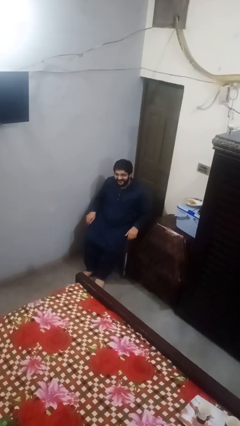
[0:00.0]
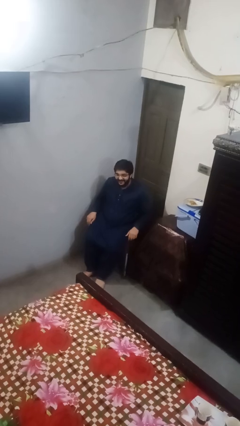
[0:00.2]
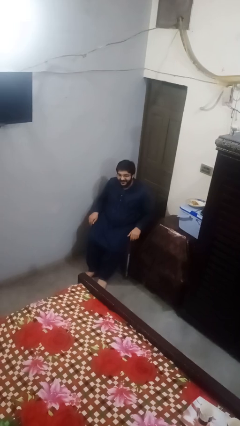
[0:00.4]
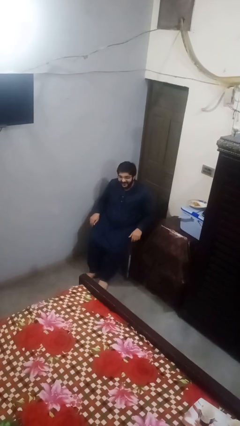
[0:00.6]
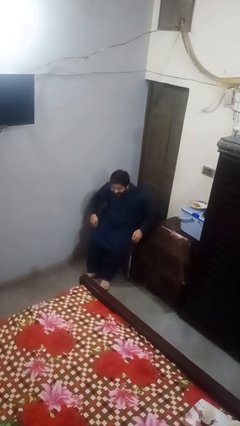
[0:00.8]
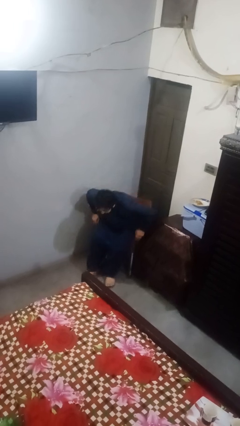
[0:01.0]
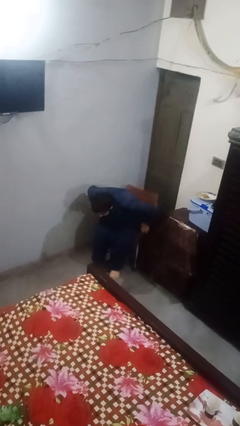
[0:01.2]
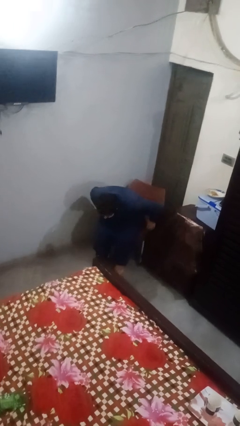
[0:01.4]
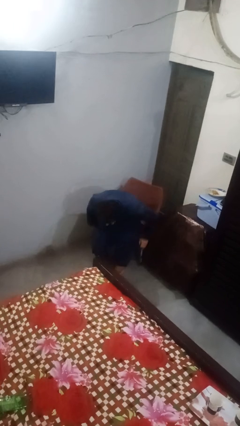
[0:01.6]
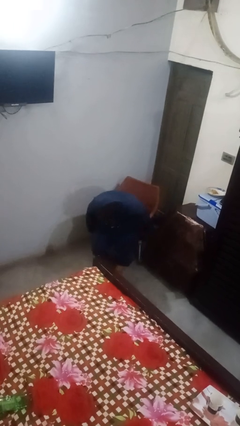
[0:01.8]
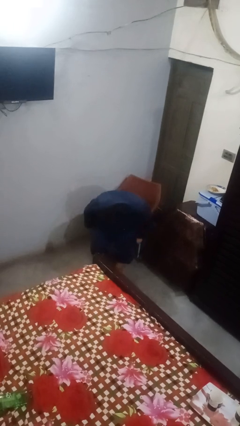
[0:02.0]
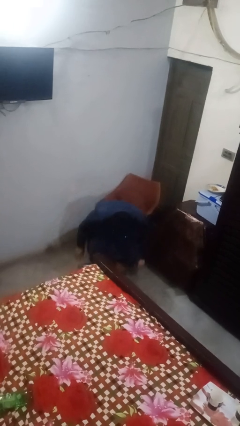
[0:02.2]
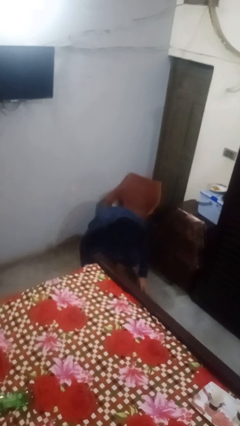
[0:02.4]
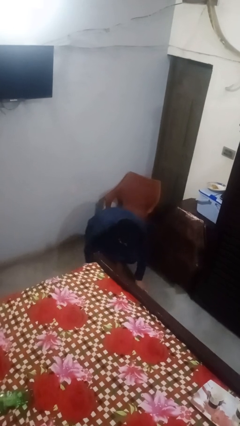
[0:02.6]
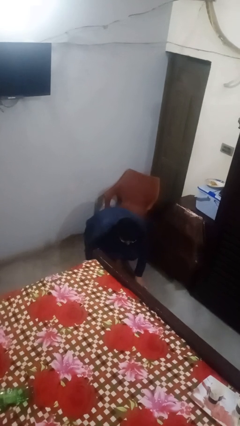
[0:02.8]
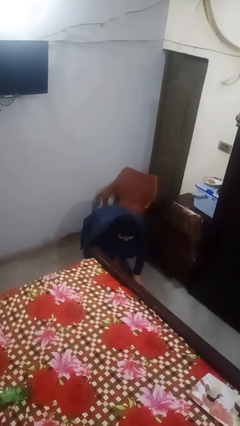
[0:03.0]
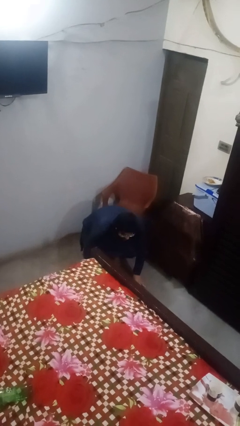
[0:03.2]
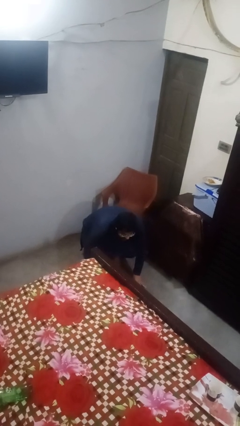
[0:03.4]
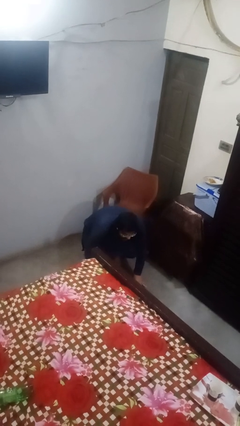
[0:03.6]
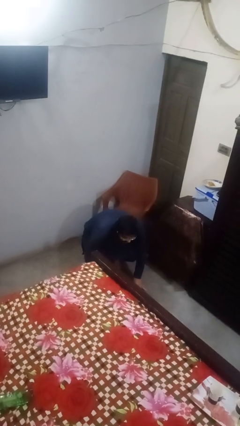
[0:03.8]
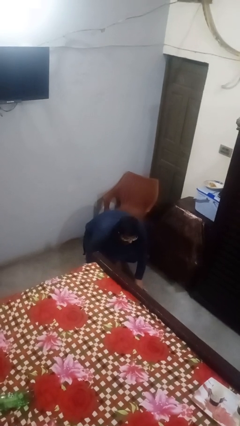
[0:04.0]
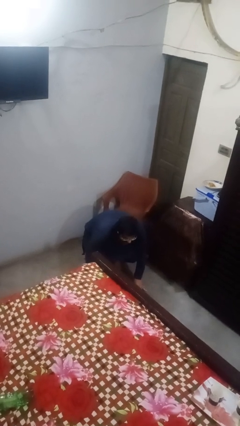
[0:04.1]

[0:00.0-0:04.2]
person falls from chair

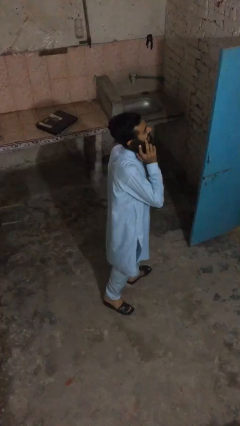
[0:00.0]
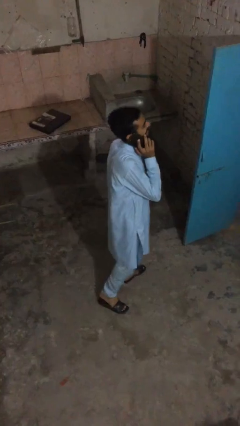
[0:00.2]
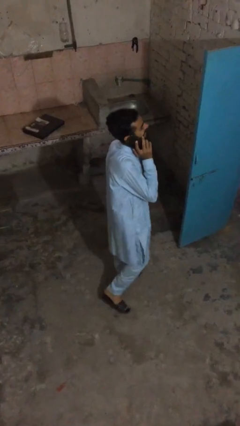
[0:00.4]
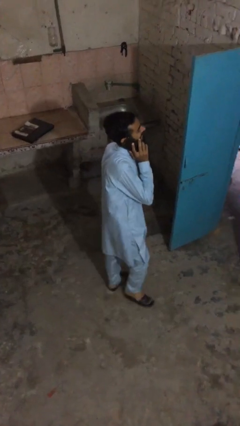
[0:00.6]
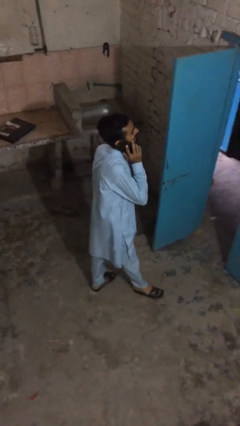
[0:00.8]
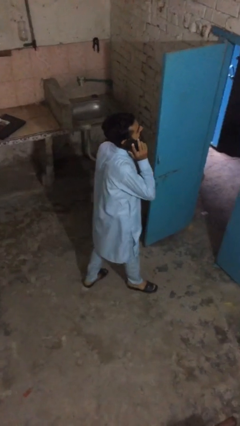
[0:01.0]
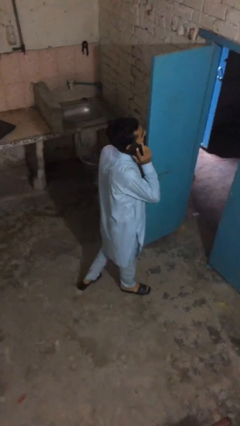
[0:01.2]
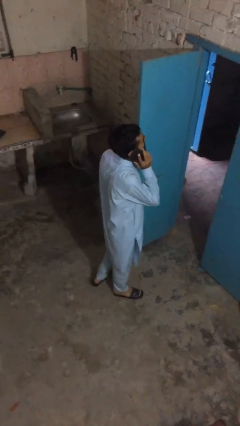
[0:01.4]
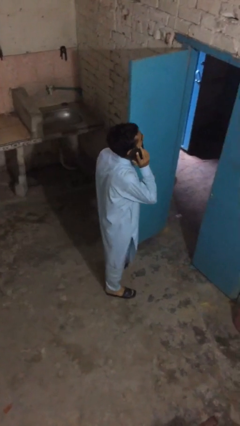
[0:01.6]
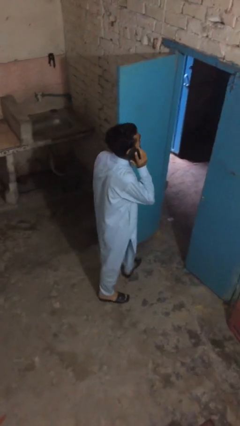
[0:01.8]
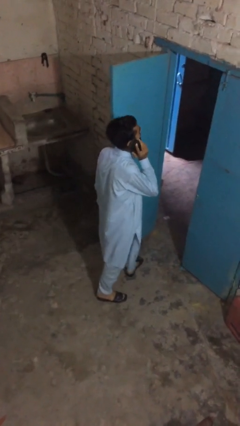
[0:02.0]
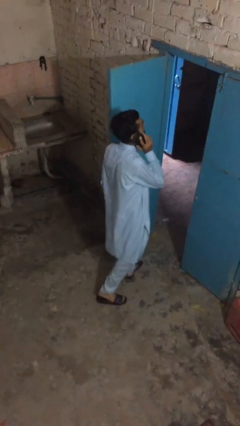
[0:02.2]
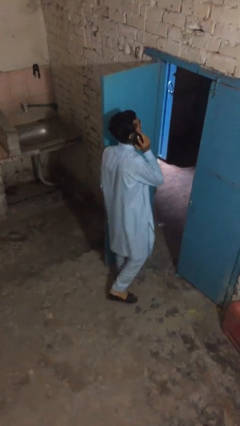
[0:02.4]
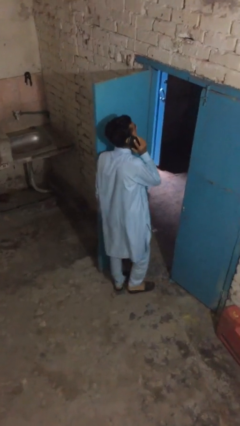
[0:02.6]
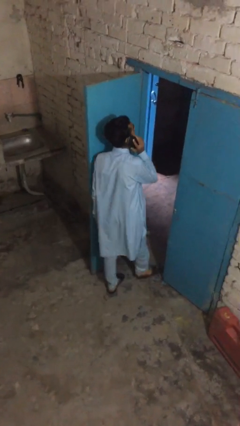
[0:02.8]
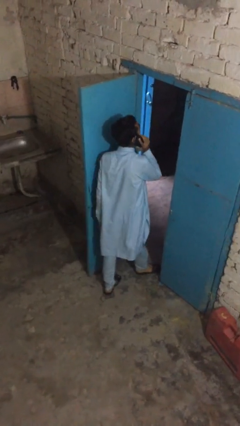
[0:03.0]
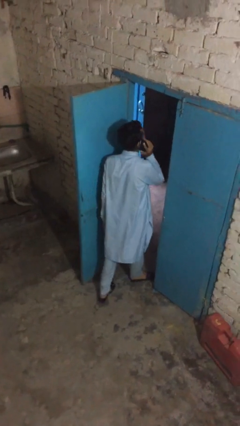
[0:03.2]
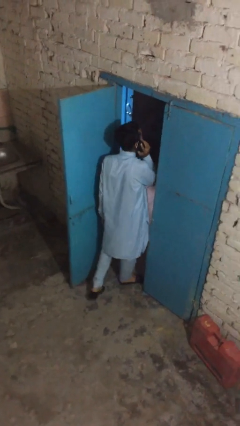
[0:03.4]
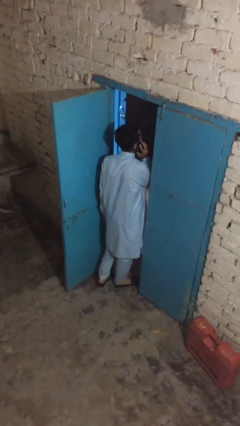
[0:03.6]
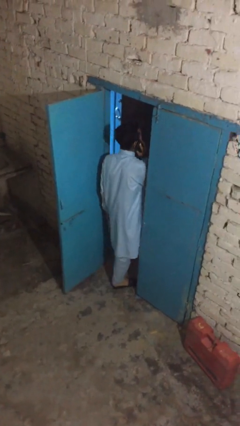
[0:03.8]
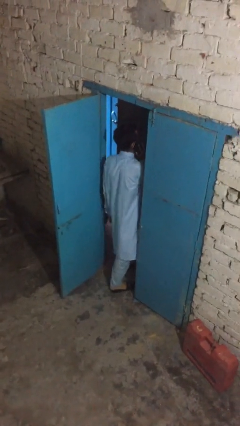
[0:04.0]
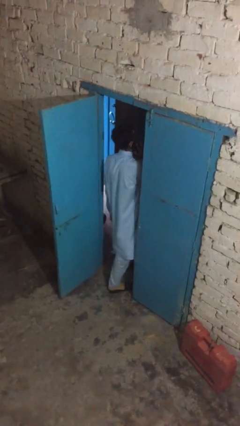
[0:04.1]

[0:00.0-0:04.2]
person exits scene through structure

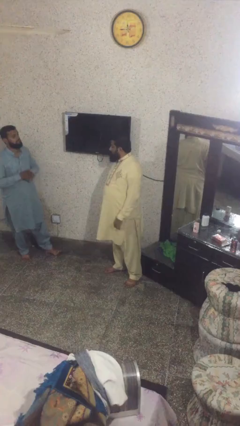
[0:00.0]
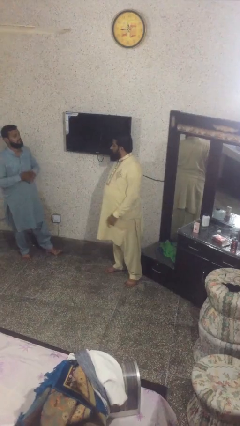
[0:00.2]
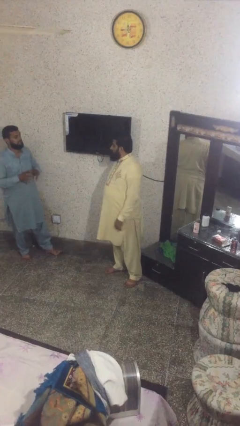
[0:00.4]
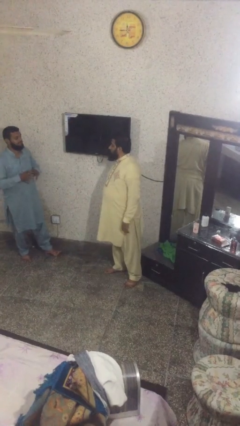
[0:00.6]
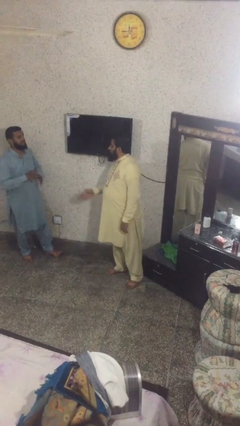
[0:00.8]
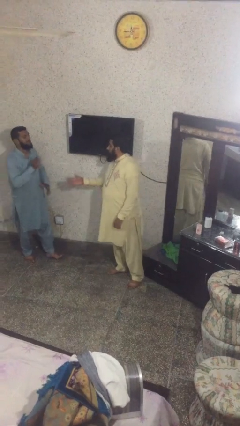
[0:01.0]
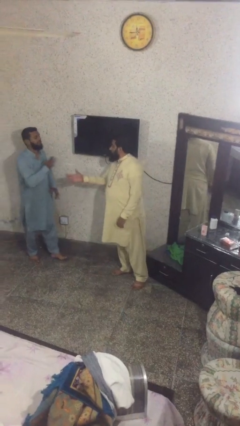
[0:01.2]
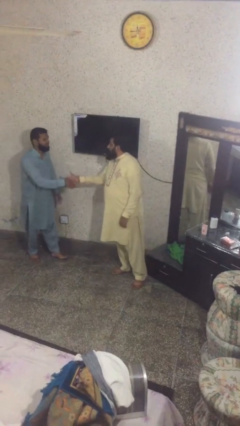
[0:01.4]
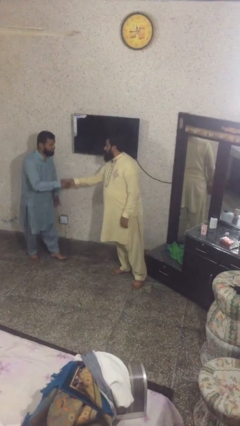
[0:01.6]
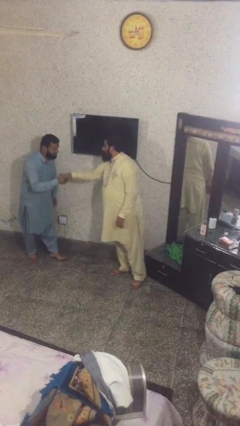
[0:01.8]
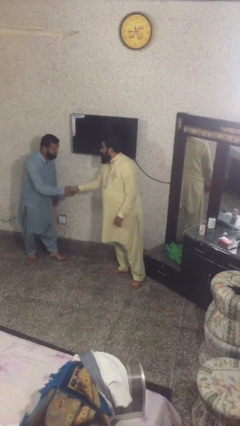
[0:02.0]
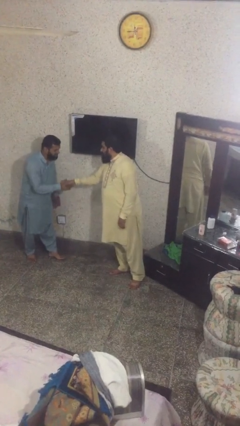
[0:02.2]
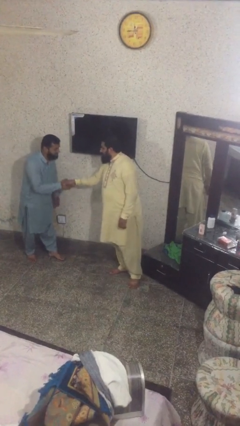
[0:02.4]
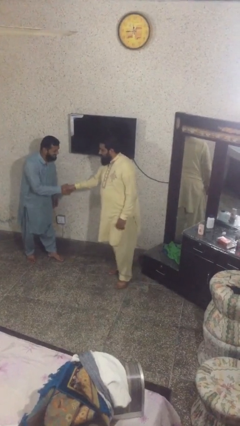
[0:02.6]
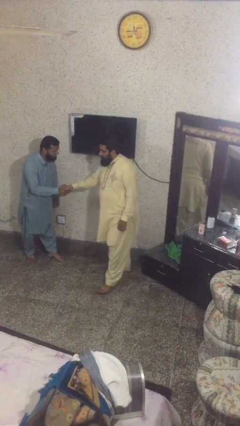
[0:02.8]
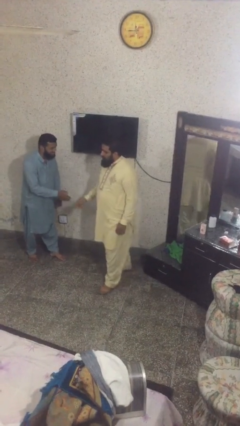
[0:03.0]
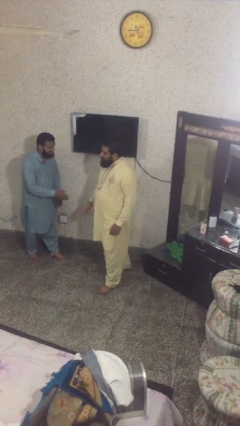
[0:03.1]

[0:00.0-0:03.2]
person shakes hand

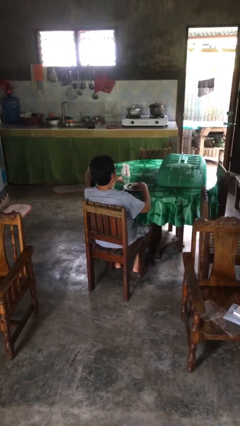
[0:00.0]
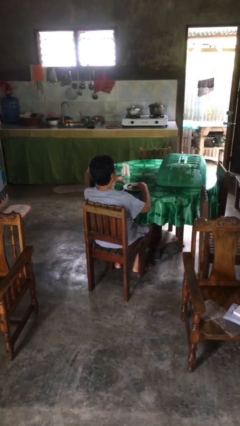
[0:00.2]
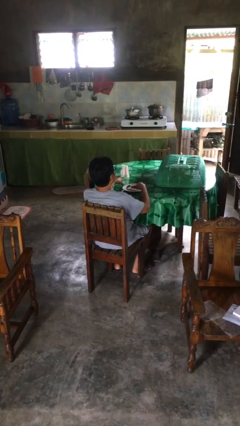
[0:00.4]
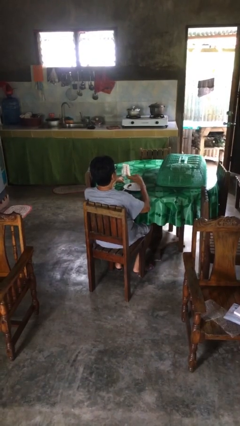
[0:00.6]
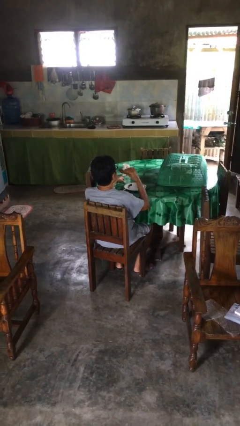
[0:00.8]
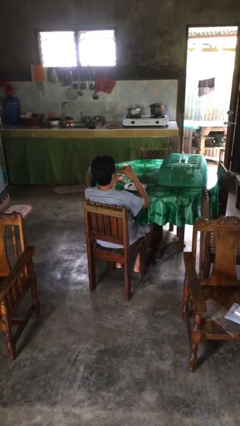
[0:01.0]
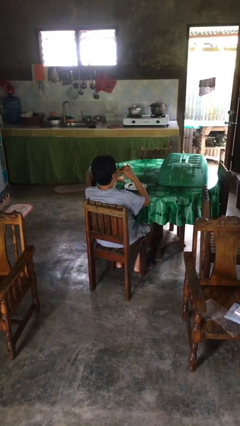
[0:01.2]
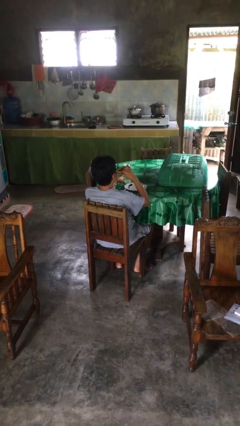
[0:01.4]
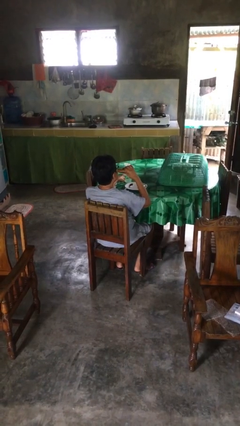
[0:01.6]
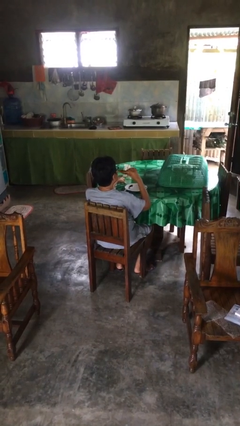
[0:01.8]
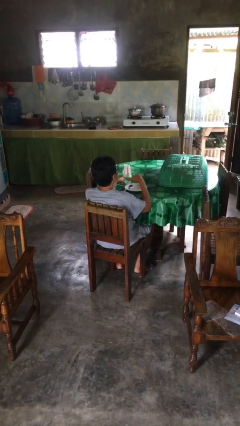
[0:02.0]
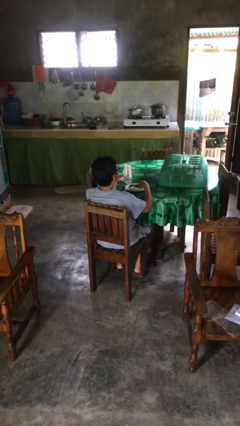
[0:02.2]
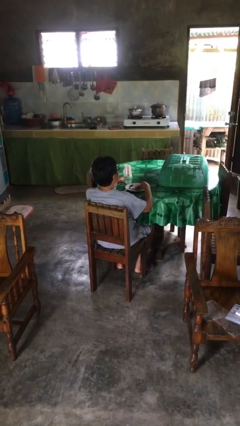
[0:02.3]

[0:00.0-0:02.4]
person eats with hands

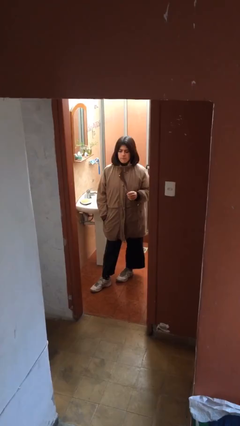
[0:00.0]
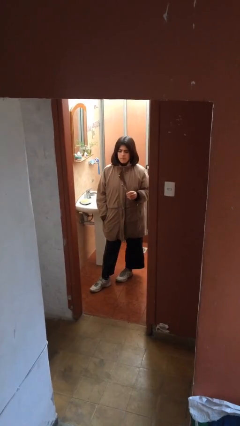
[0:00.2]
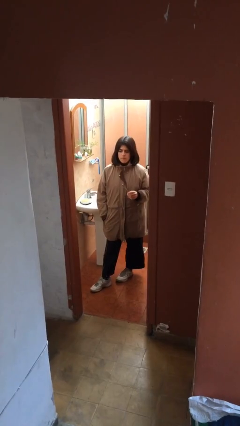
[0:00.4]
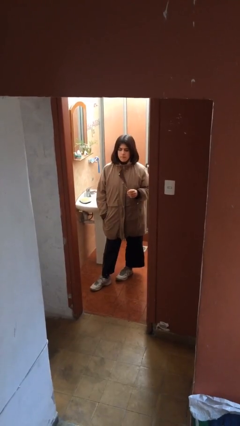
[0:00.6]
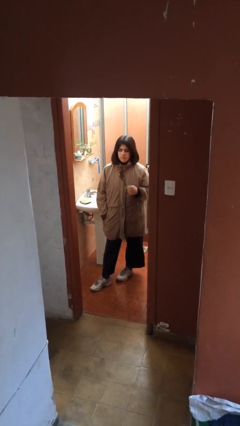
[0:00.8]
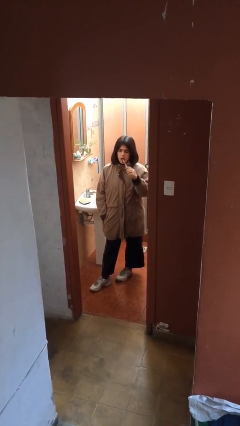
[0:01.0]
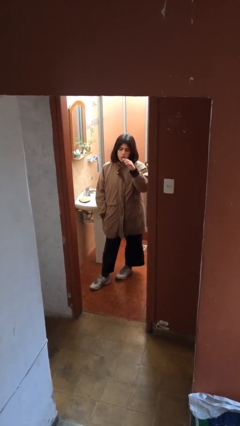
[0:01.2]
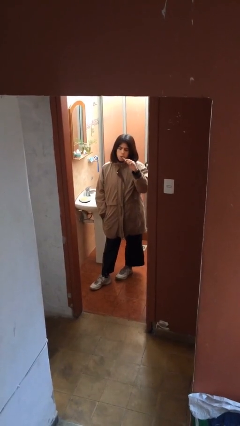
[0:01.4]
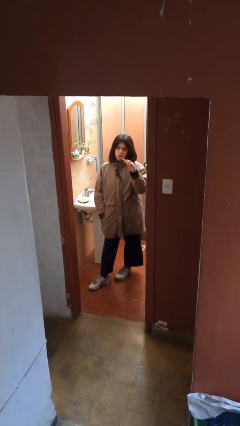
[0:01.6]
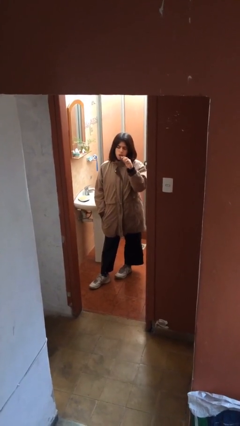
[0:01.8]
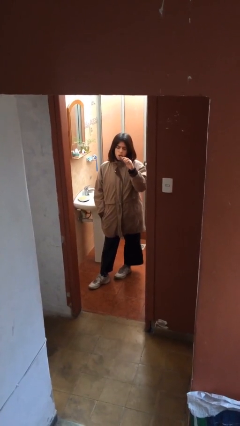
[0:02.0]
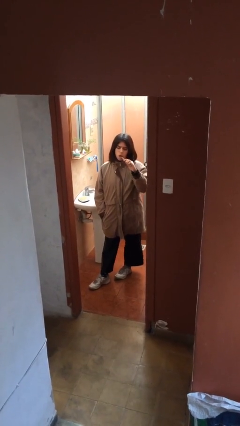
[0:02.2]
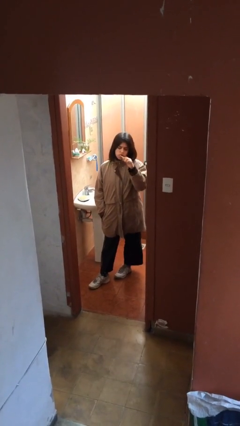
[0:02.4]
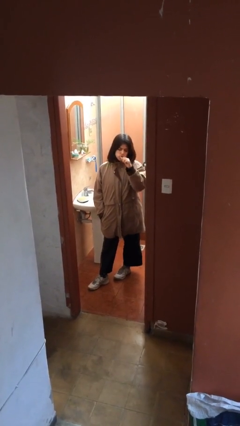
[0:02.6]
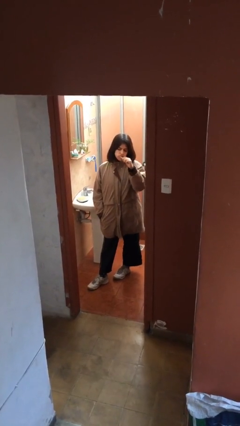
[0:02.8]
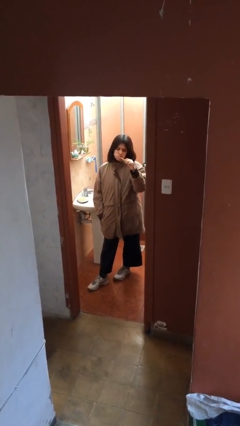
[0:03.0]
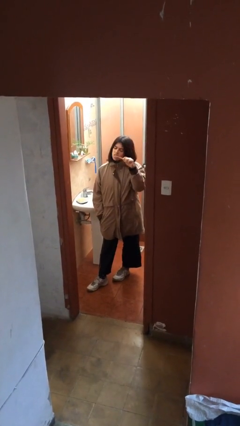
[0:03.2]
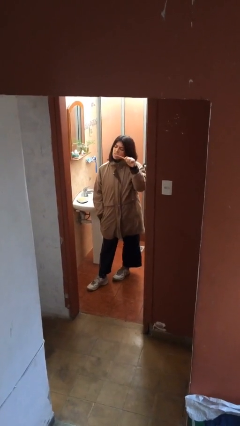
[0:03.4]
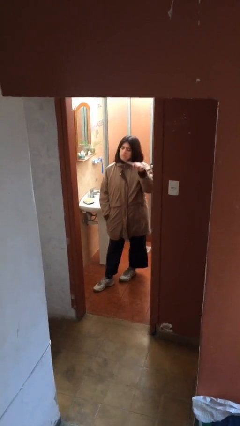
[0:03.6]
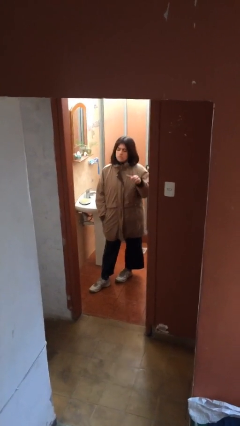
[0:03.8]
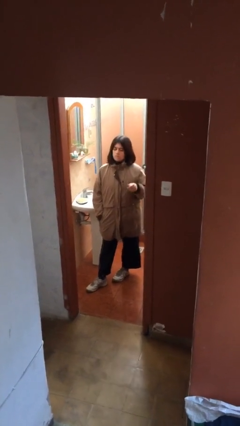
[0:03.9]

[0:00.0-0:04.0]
person brushes teeth
